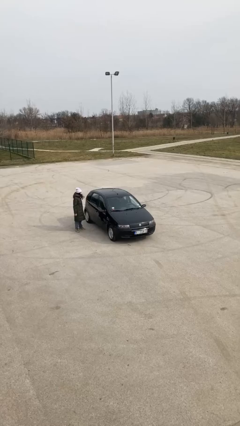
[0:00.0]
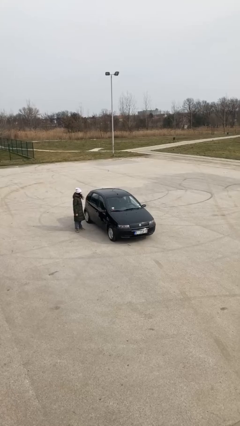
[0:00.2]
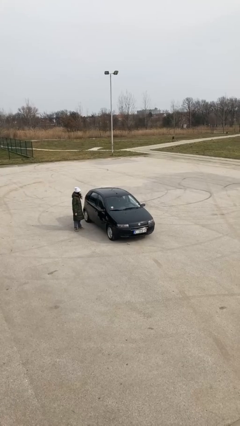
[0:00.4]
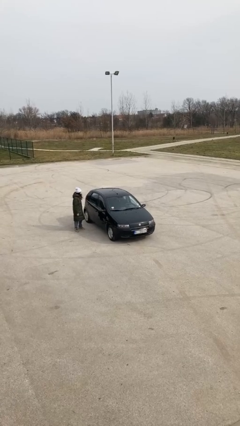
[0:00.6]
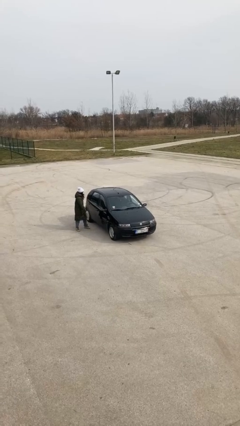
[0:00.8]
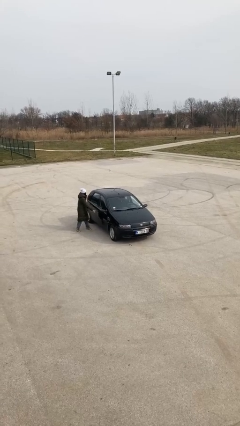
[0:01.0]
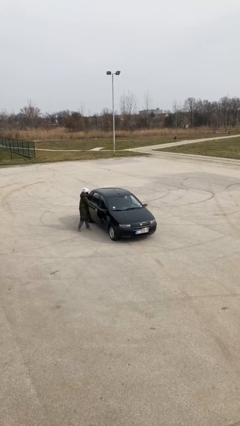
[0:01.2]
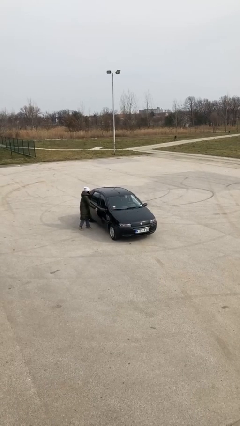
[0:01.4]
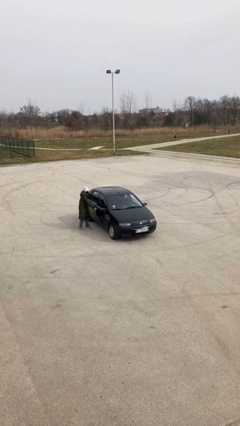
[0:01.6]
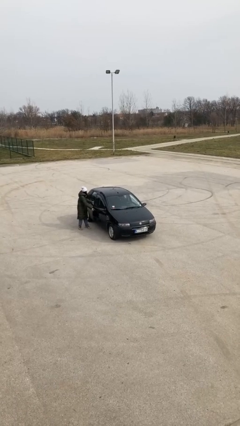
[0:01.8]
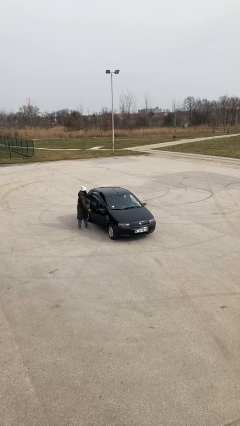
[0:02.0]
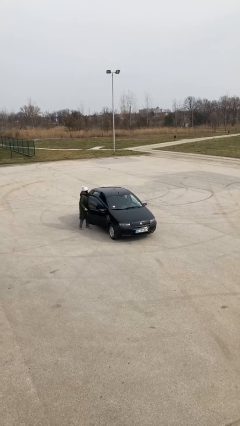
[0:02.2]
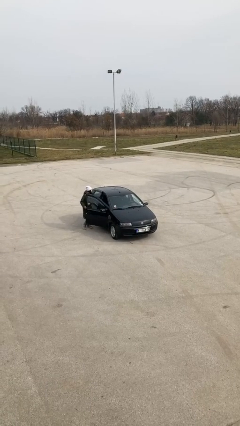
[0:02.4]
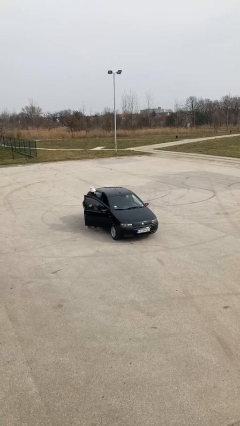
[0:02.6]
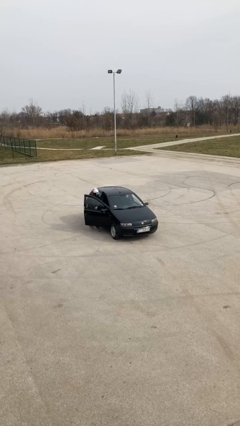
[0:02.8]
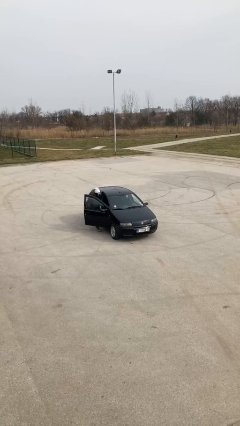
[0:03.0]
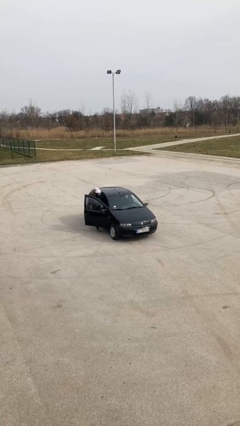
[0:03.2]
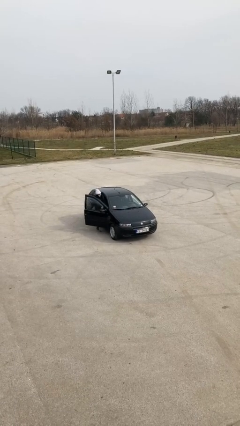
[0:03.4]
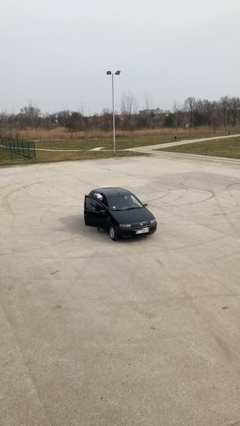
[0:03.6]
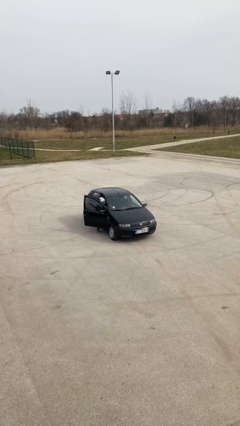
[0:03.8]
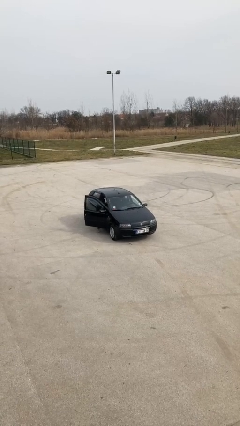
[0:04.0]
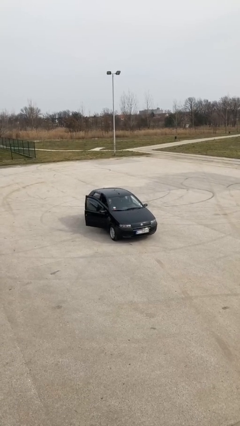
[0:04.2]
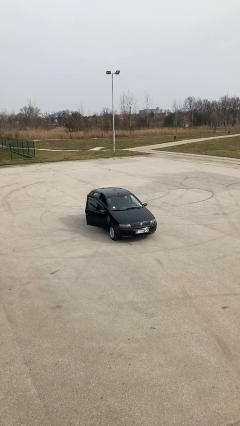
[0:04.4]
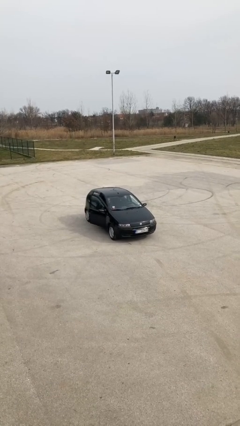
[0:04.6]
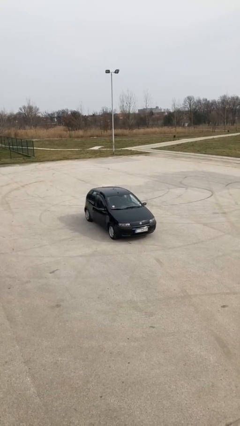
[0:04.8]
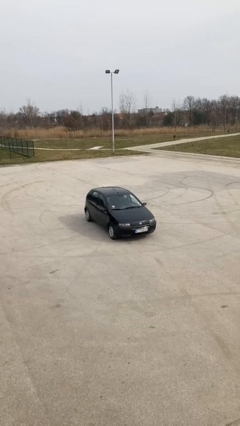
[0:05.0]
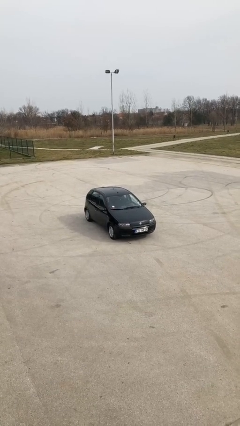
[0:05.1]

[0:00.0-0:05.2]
car picks up person

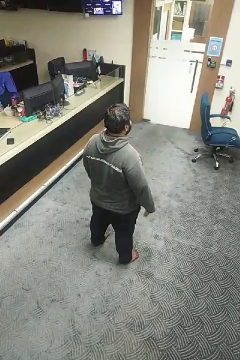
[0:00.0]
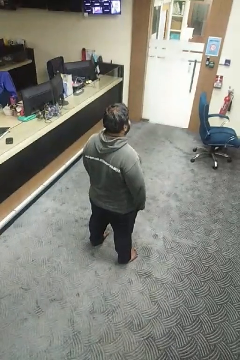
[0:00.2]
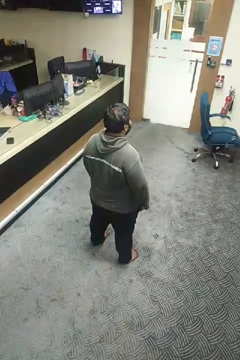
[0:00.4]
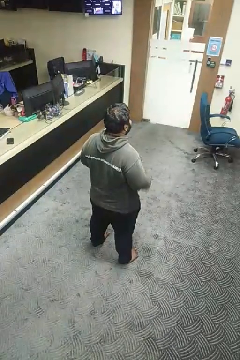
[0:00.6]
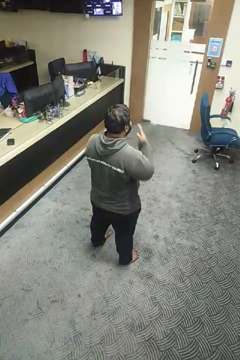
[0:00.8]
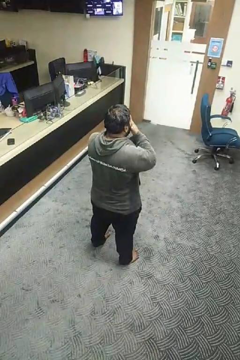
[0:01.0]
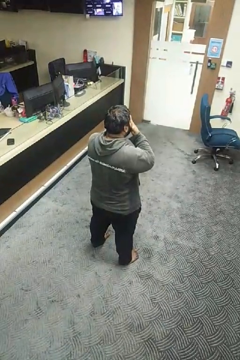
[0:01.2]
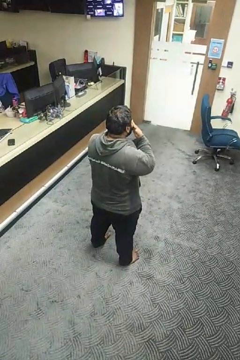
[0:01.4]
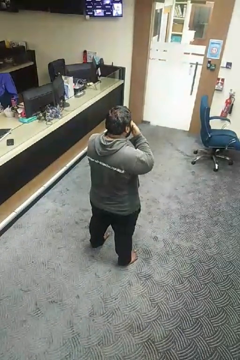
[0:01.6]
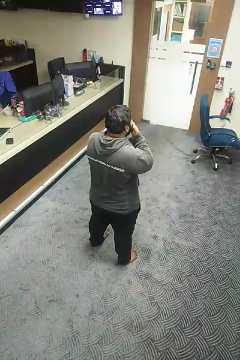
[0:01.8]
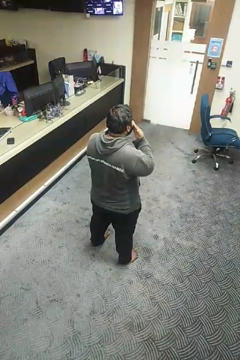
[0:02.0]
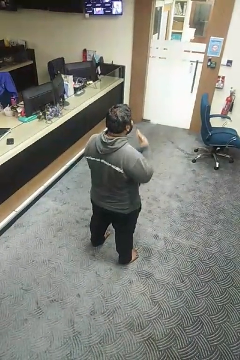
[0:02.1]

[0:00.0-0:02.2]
person rubs eyes

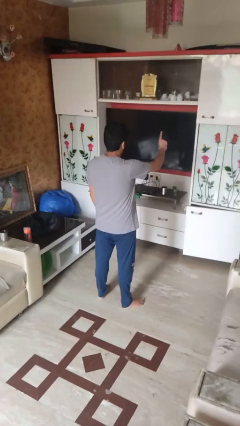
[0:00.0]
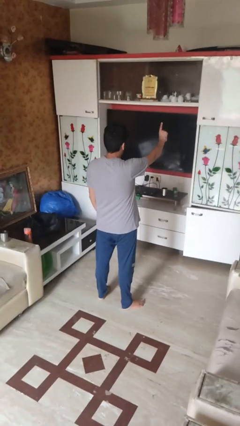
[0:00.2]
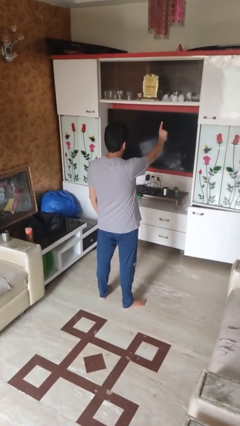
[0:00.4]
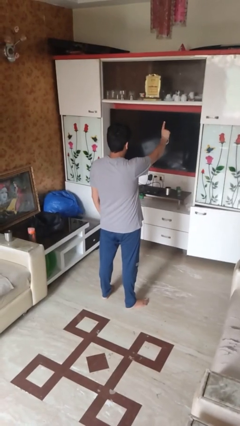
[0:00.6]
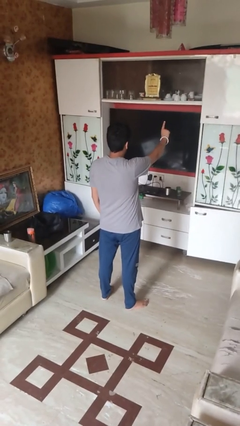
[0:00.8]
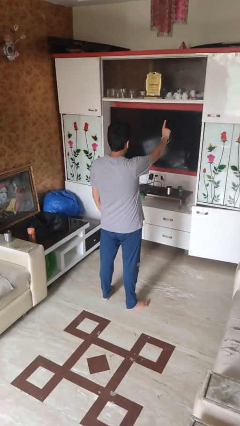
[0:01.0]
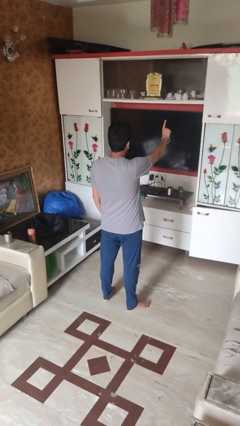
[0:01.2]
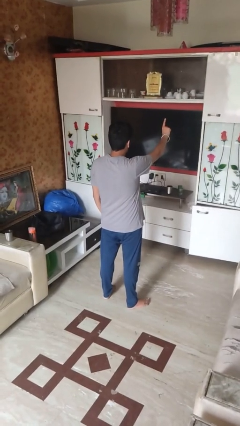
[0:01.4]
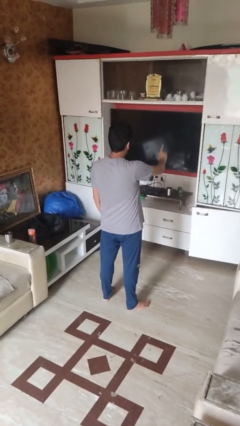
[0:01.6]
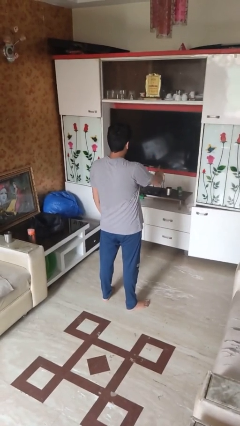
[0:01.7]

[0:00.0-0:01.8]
person gestures number one

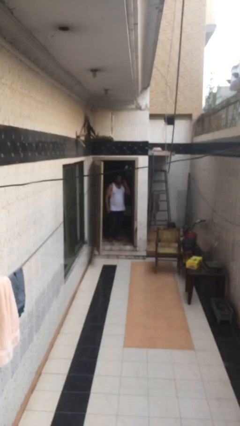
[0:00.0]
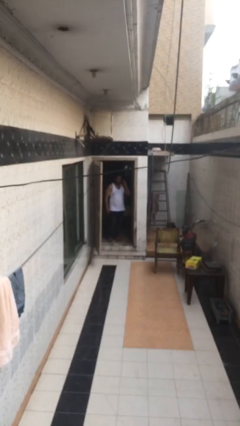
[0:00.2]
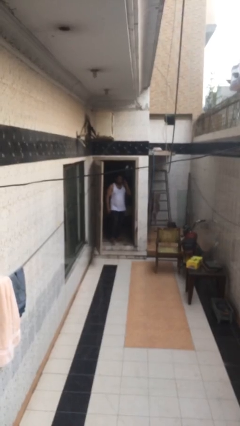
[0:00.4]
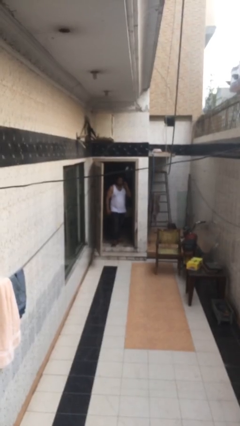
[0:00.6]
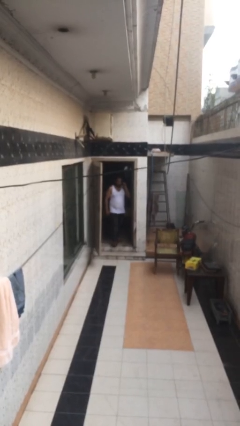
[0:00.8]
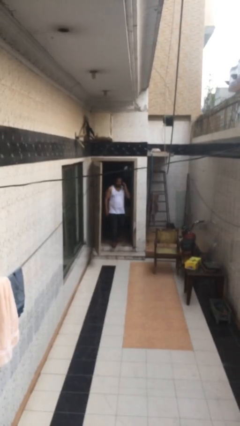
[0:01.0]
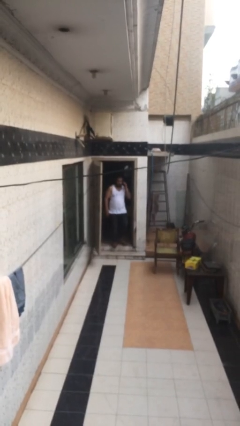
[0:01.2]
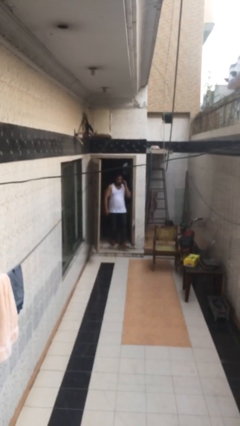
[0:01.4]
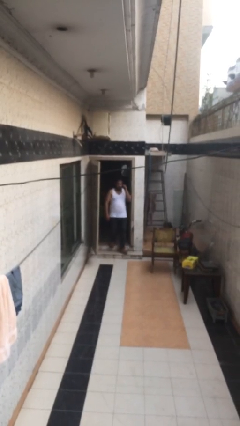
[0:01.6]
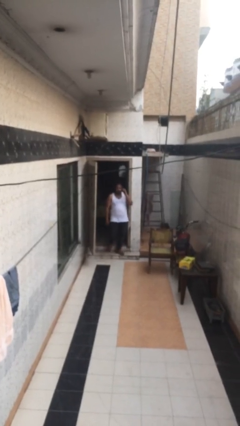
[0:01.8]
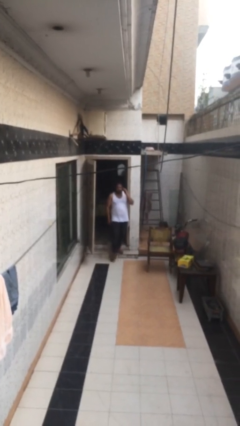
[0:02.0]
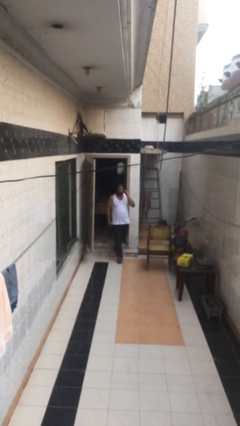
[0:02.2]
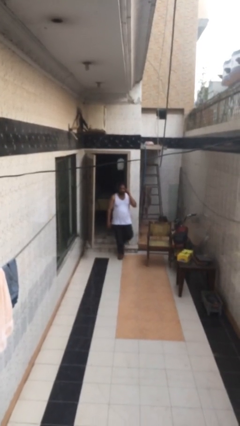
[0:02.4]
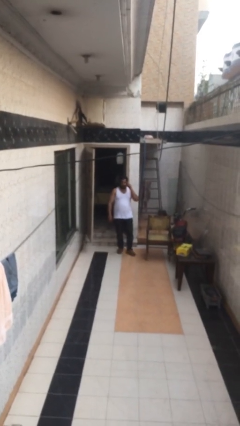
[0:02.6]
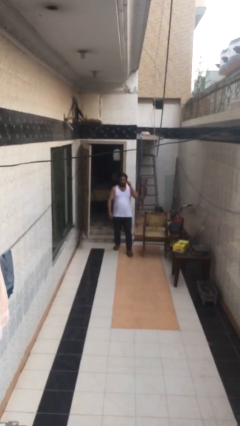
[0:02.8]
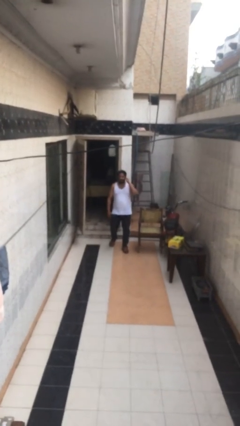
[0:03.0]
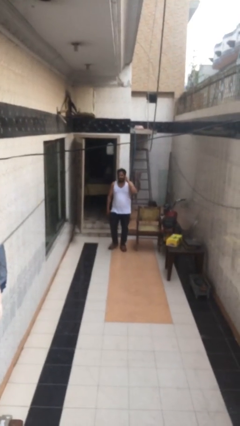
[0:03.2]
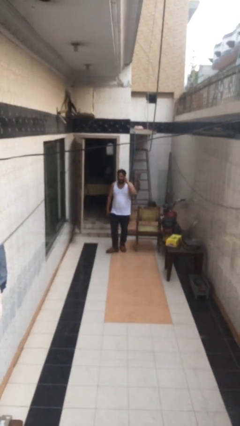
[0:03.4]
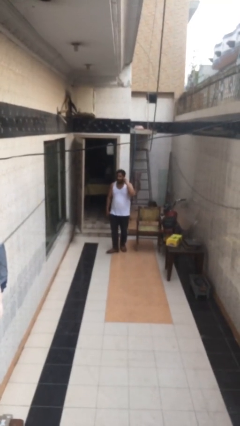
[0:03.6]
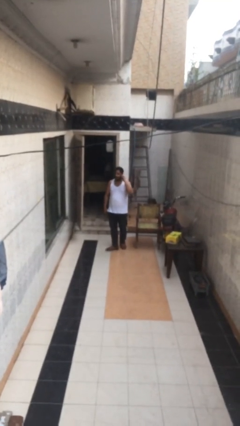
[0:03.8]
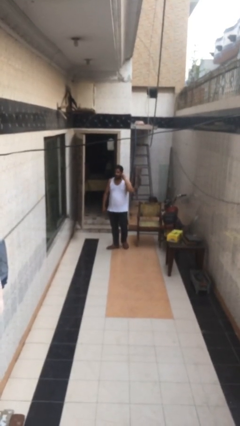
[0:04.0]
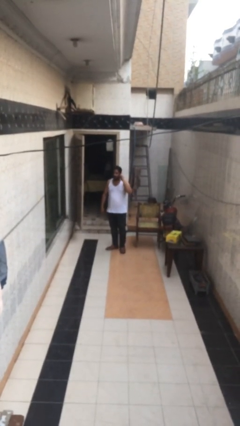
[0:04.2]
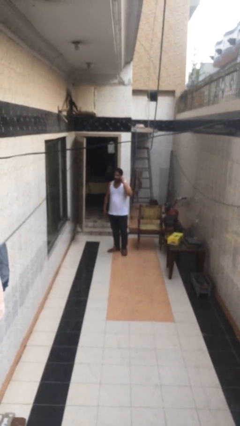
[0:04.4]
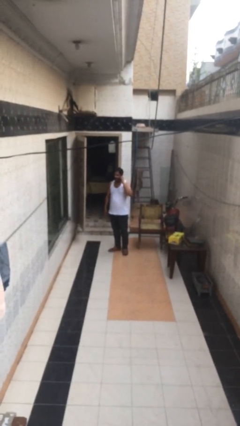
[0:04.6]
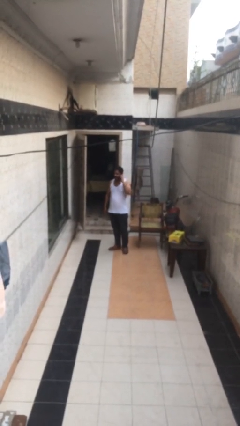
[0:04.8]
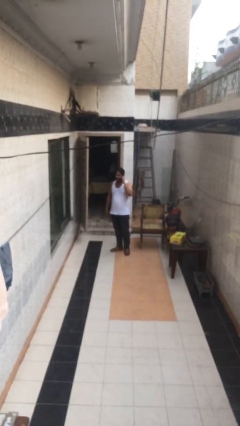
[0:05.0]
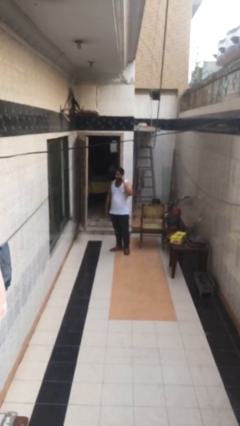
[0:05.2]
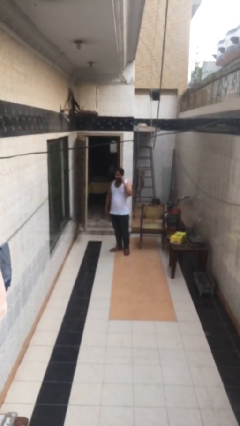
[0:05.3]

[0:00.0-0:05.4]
person enters scene through structure

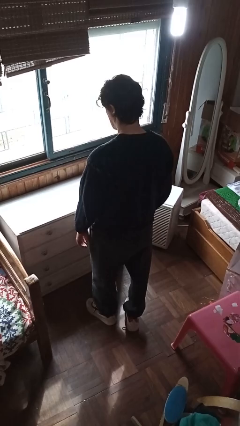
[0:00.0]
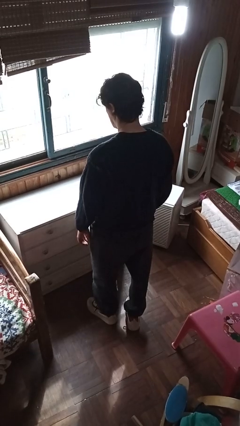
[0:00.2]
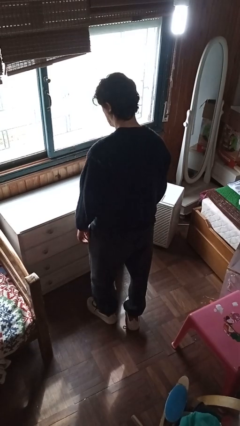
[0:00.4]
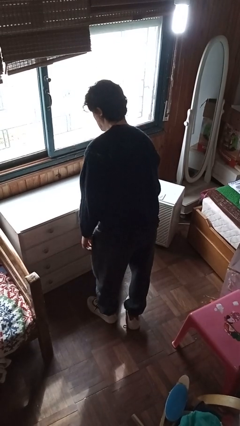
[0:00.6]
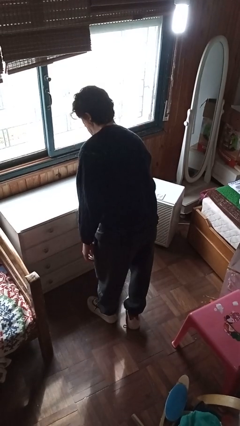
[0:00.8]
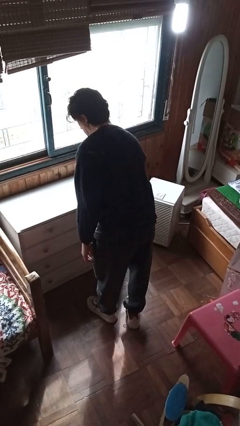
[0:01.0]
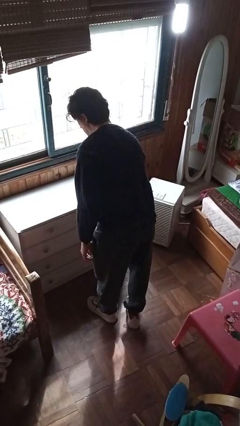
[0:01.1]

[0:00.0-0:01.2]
person closes dresser drawer

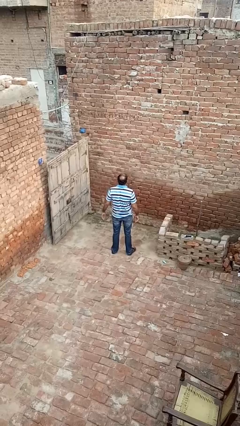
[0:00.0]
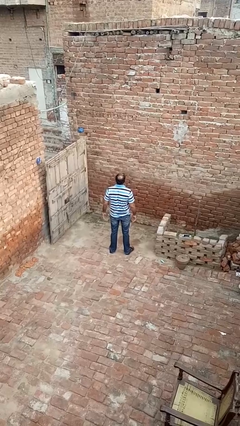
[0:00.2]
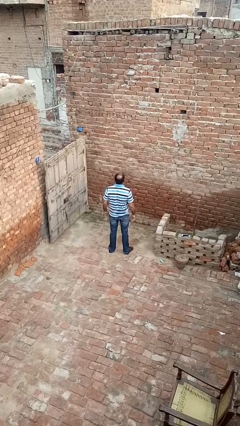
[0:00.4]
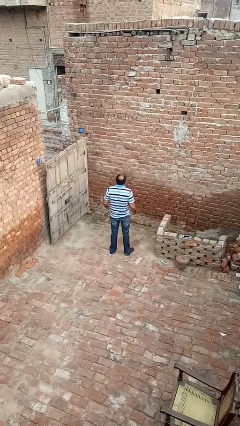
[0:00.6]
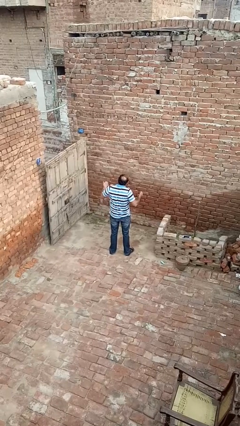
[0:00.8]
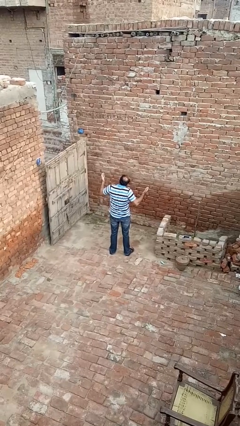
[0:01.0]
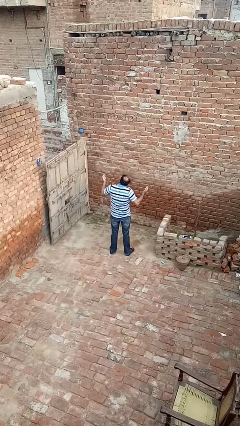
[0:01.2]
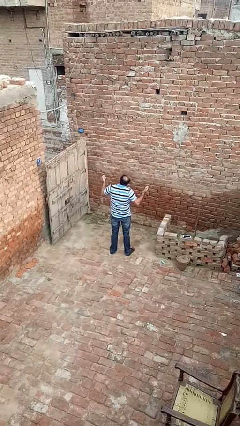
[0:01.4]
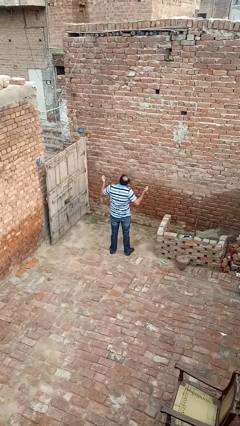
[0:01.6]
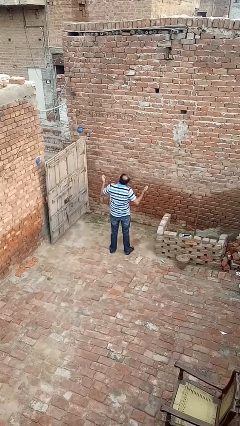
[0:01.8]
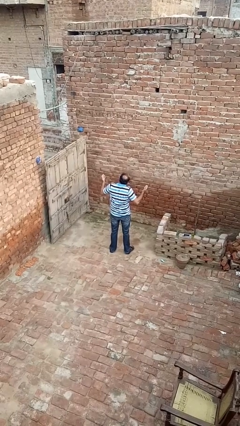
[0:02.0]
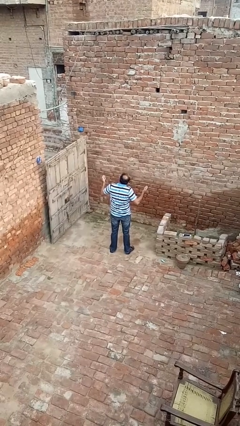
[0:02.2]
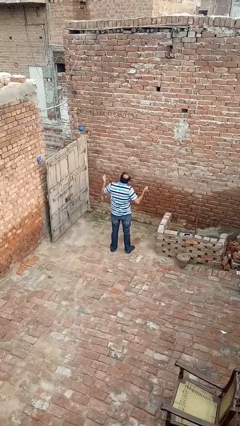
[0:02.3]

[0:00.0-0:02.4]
person shrugs
